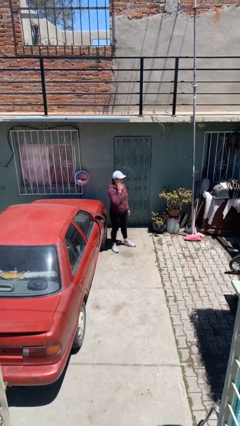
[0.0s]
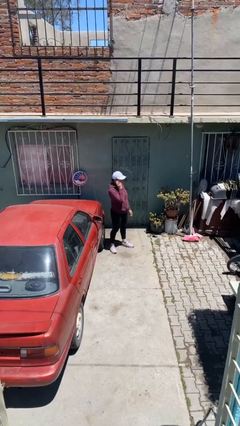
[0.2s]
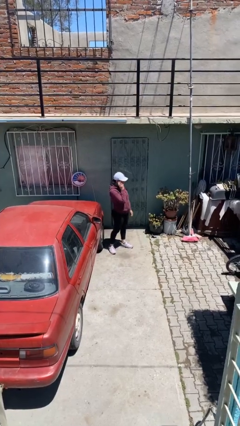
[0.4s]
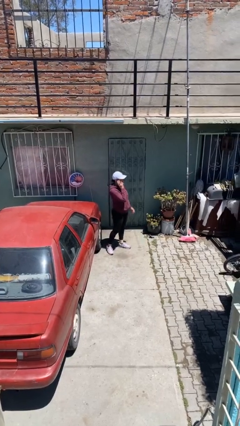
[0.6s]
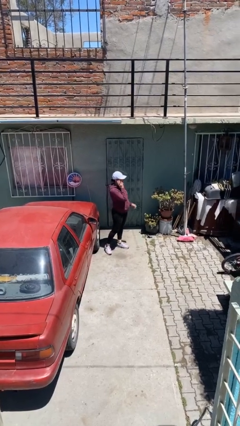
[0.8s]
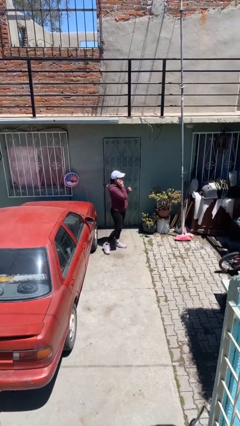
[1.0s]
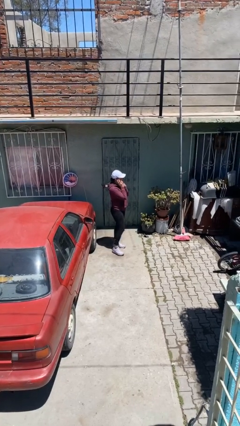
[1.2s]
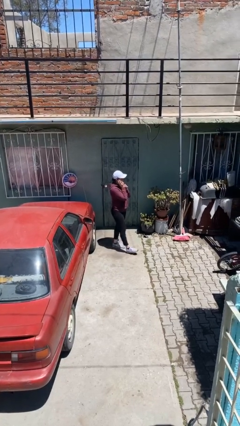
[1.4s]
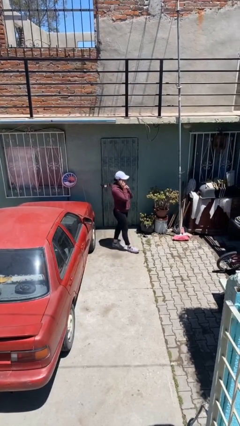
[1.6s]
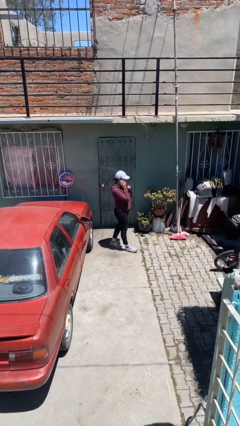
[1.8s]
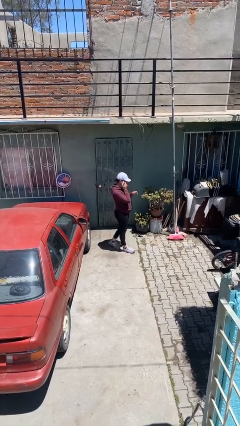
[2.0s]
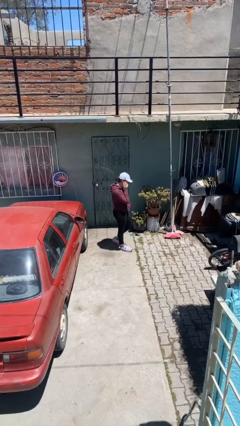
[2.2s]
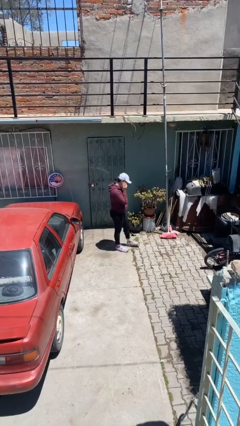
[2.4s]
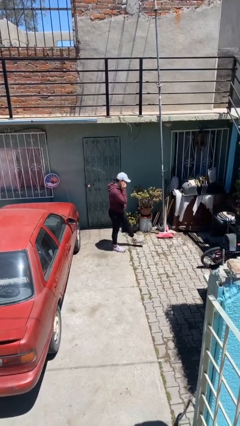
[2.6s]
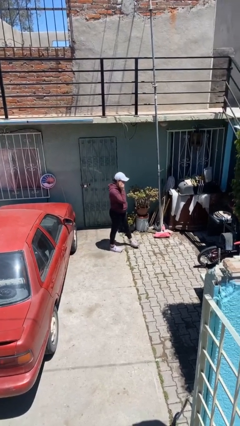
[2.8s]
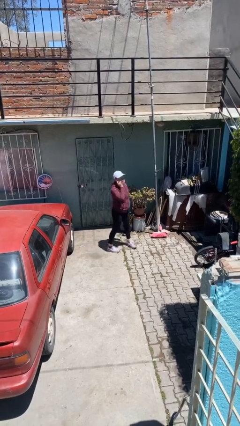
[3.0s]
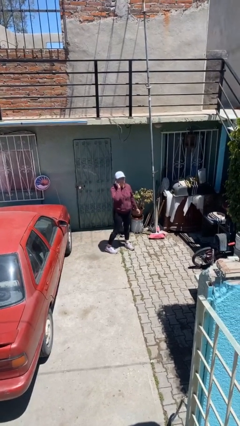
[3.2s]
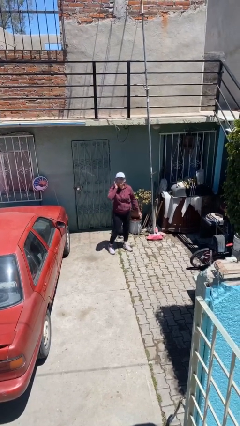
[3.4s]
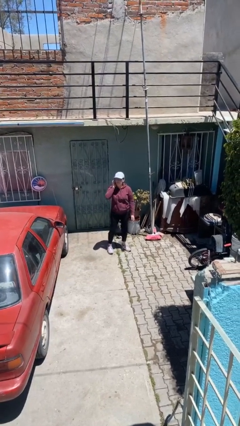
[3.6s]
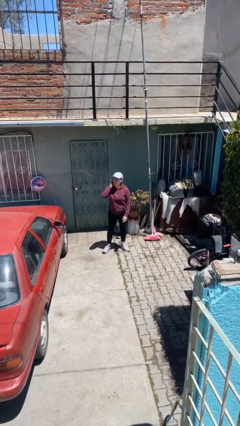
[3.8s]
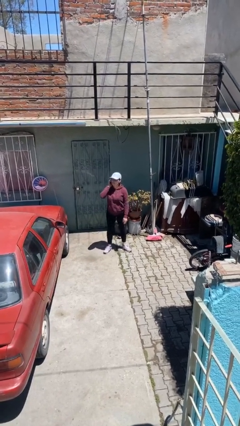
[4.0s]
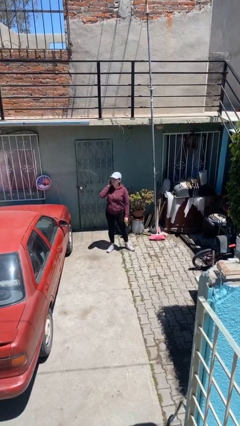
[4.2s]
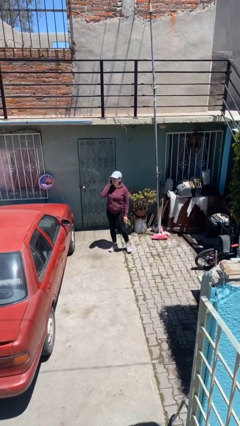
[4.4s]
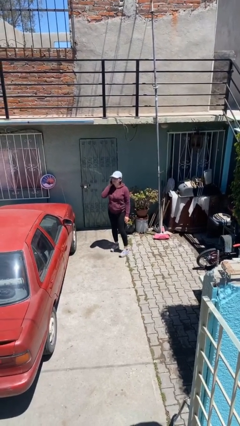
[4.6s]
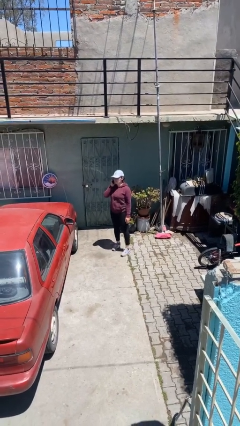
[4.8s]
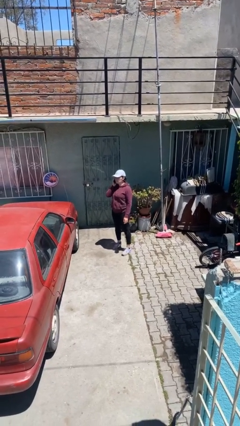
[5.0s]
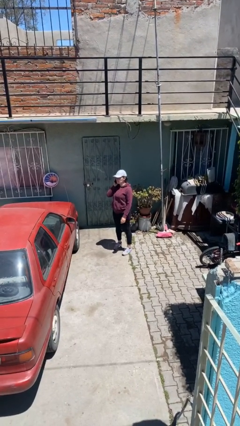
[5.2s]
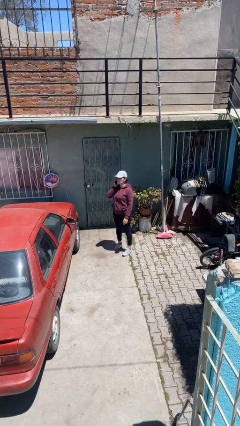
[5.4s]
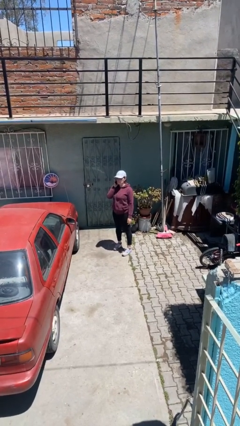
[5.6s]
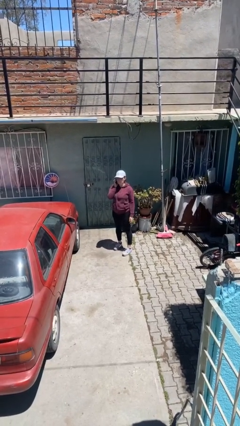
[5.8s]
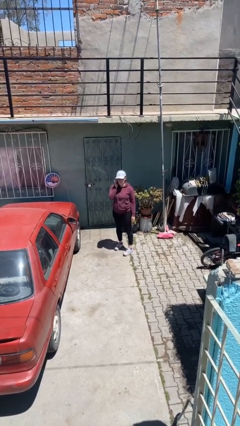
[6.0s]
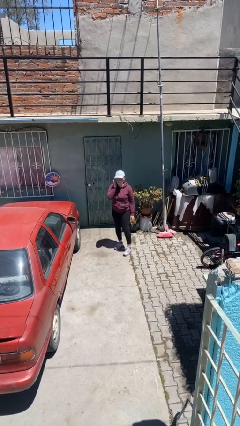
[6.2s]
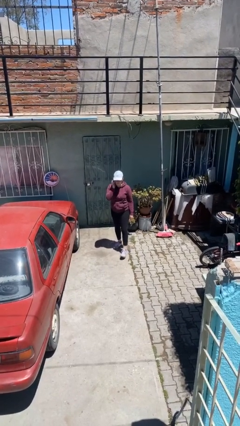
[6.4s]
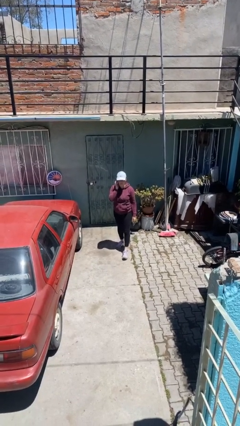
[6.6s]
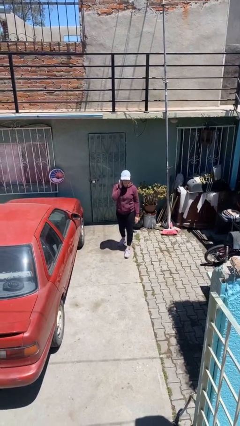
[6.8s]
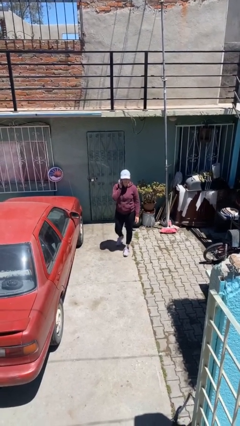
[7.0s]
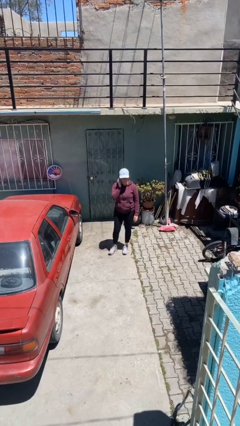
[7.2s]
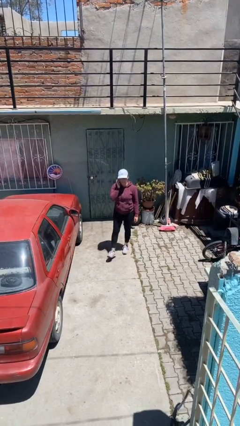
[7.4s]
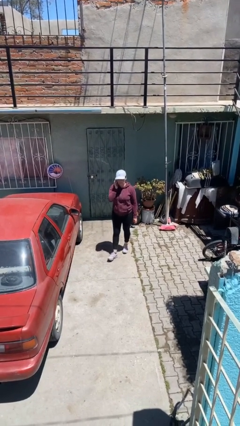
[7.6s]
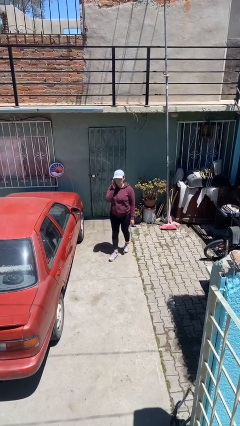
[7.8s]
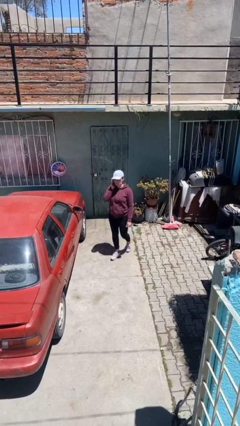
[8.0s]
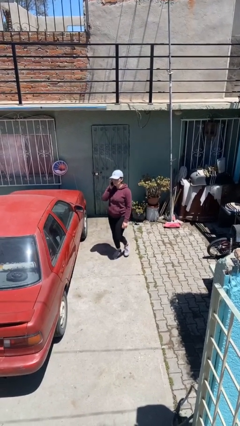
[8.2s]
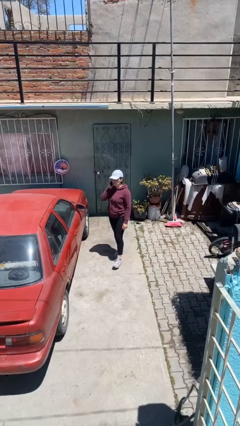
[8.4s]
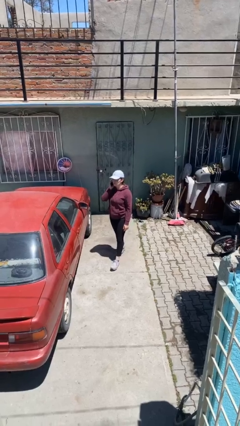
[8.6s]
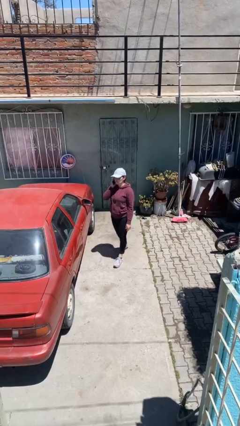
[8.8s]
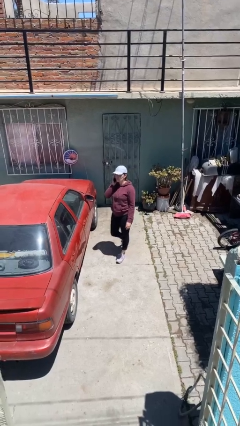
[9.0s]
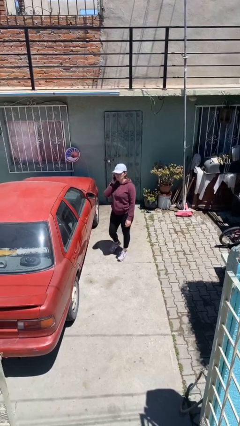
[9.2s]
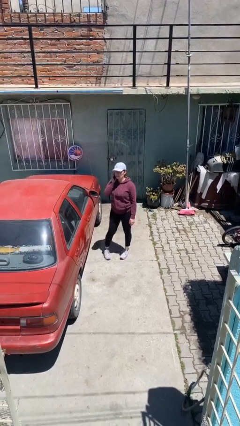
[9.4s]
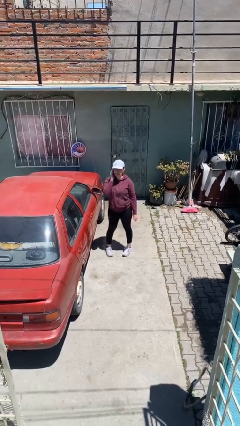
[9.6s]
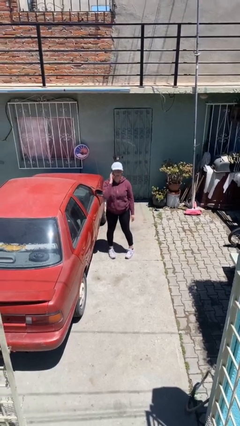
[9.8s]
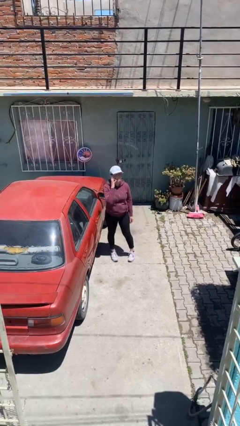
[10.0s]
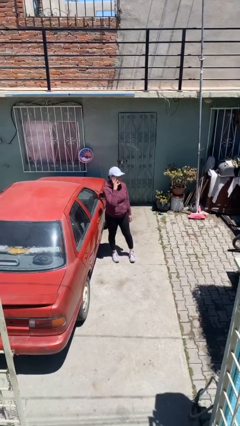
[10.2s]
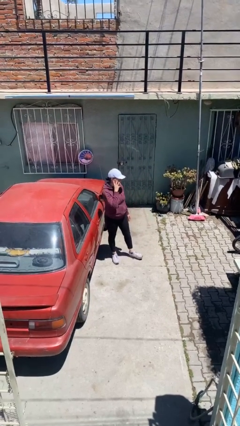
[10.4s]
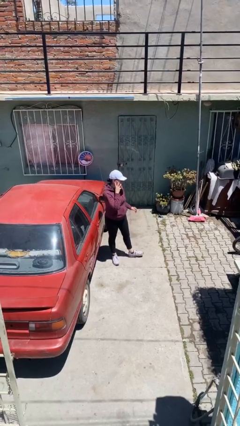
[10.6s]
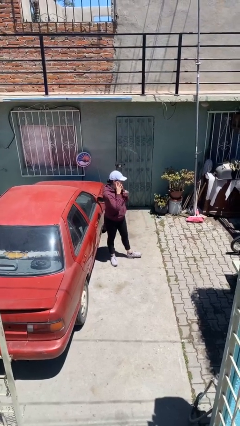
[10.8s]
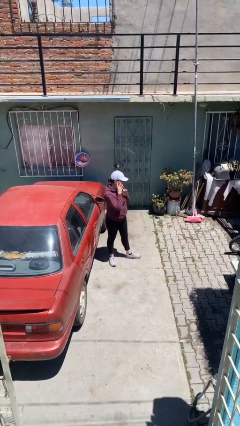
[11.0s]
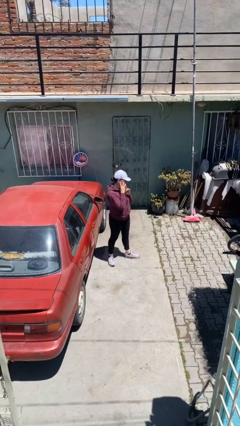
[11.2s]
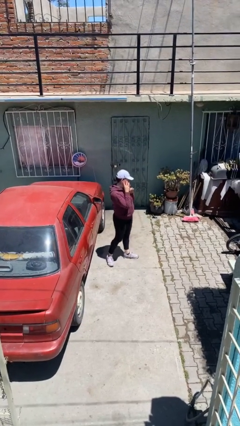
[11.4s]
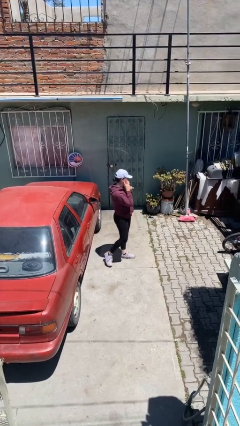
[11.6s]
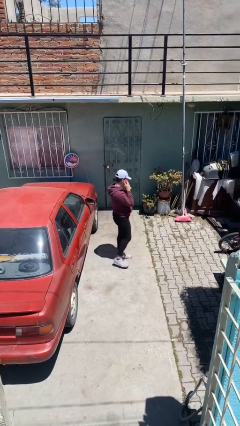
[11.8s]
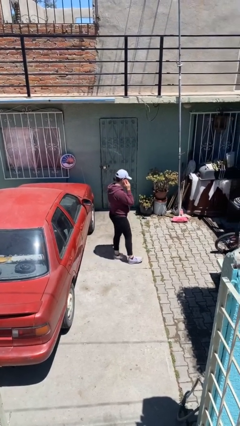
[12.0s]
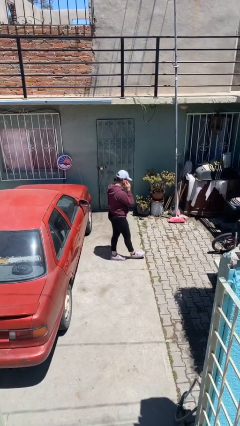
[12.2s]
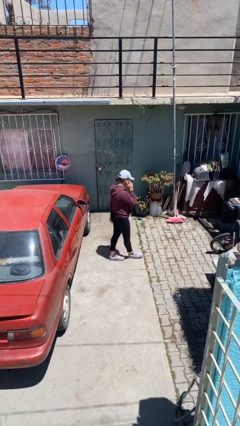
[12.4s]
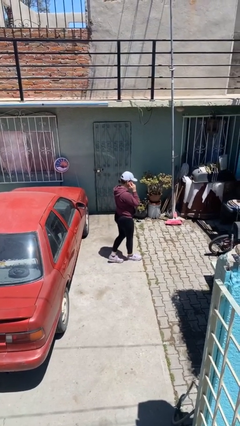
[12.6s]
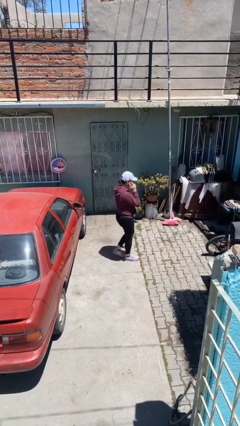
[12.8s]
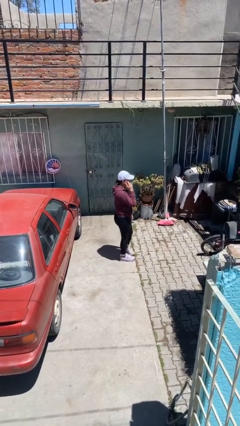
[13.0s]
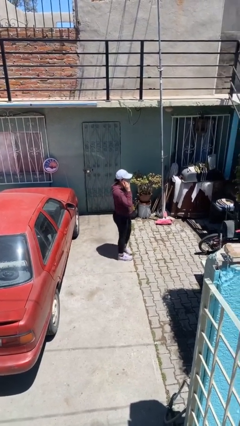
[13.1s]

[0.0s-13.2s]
person talks on phone

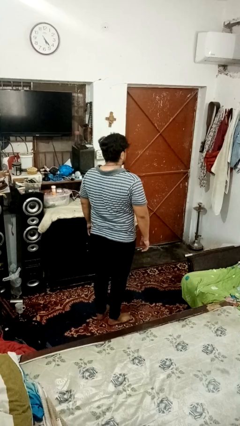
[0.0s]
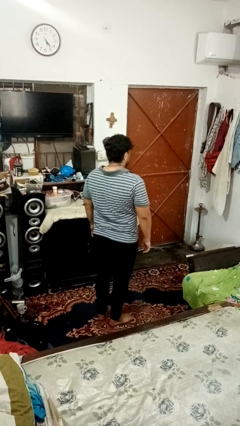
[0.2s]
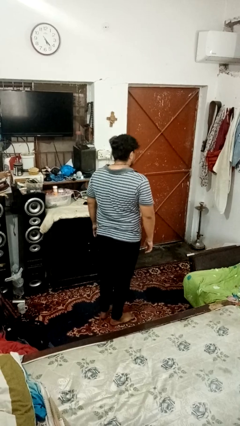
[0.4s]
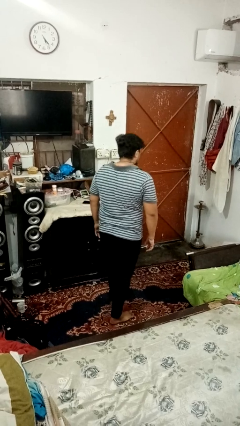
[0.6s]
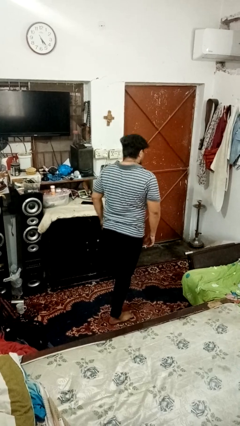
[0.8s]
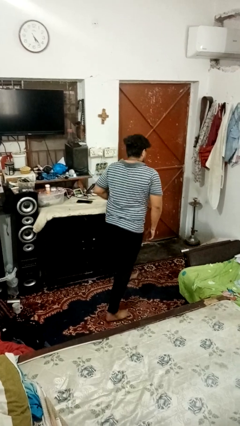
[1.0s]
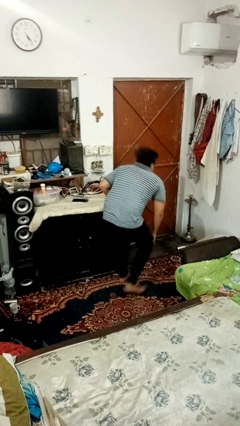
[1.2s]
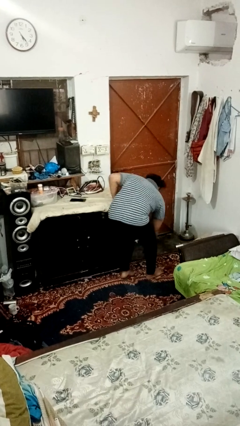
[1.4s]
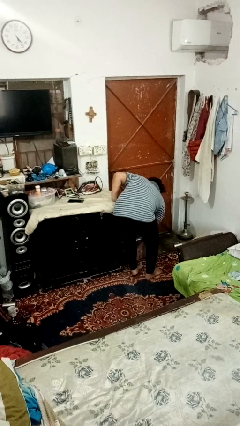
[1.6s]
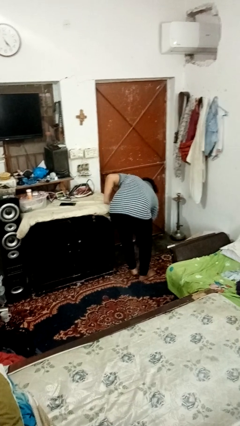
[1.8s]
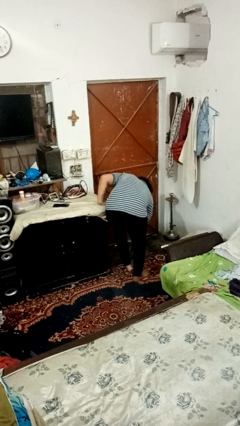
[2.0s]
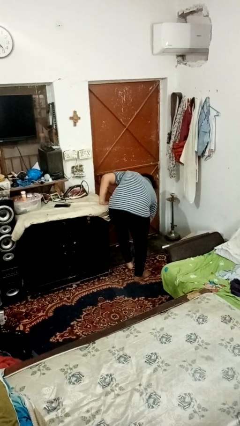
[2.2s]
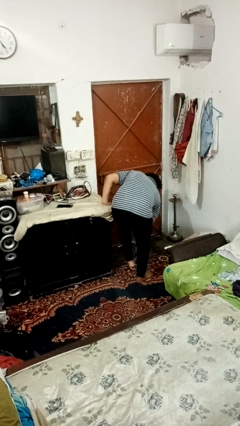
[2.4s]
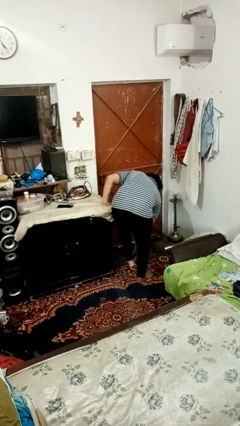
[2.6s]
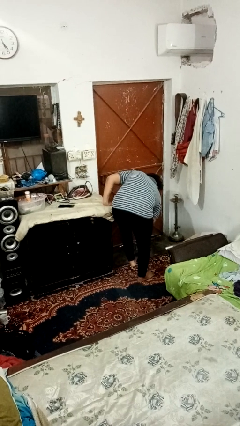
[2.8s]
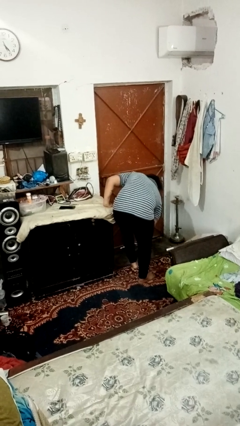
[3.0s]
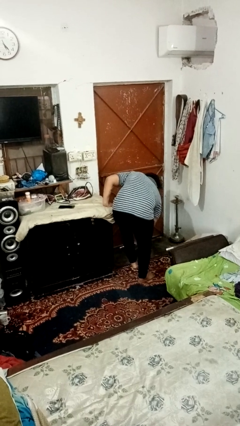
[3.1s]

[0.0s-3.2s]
person stubs toe

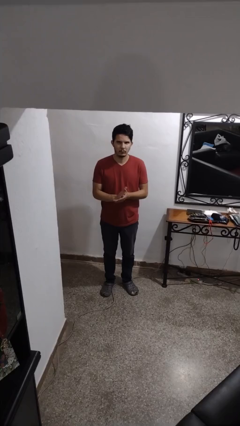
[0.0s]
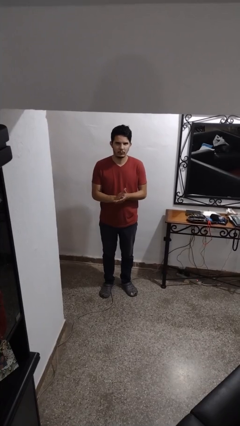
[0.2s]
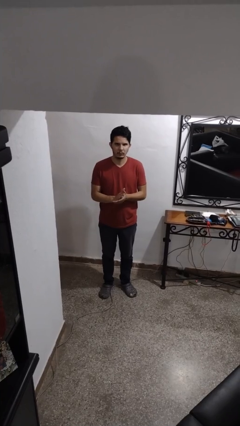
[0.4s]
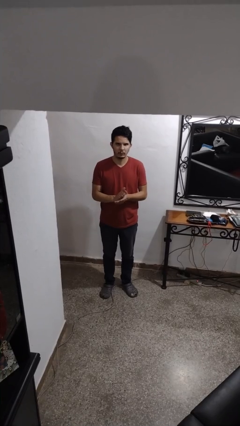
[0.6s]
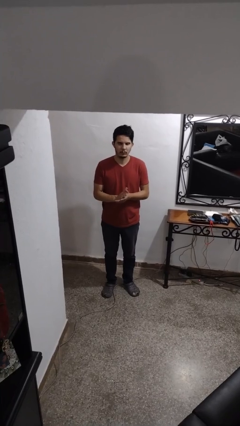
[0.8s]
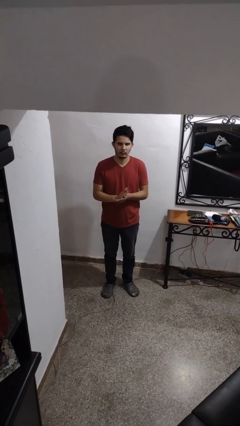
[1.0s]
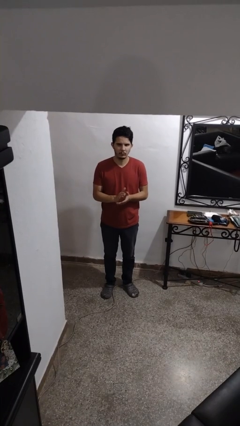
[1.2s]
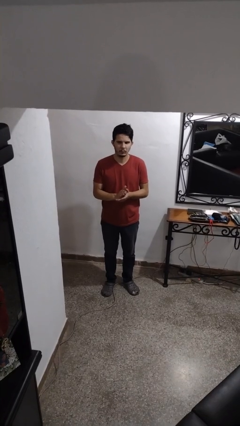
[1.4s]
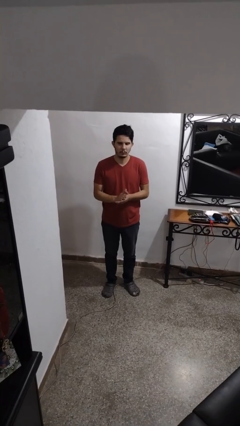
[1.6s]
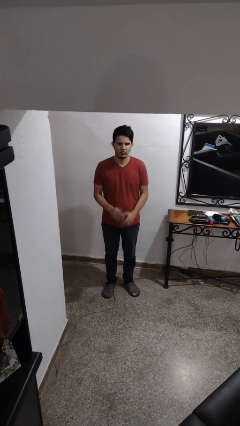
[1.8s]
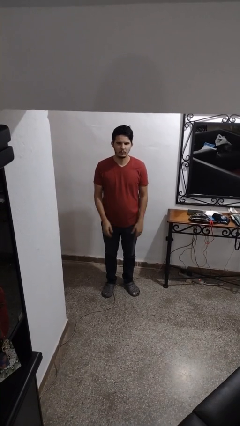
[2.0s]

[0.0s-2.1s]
person claps hands
